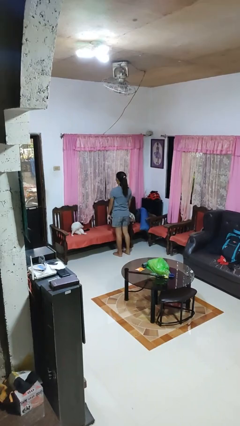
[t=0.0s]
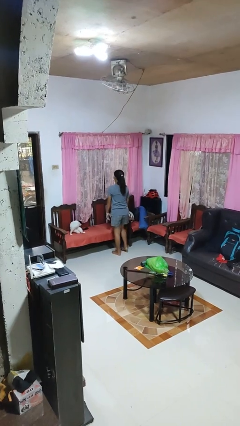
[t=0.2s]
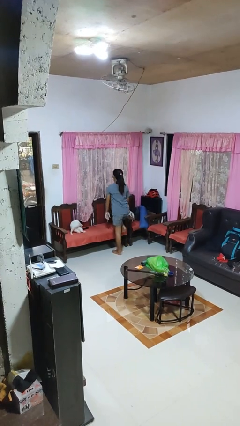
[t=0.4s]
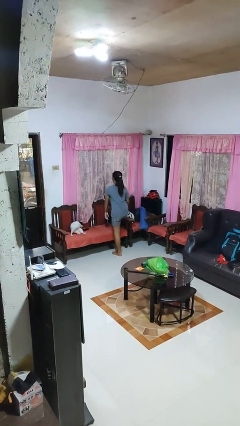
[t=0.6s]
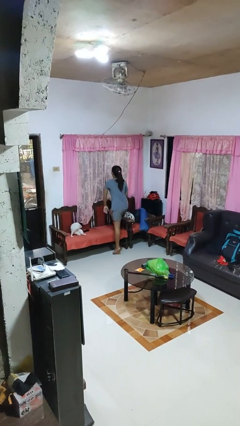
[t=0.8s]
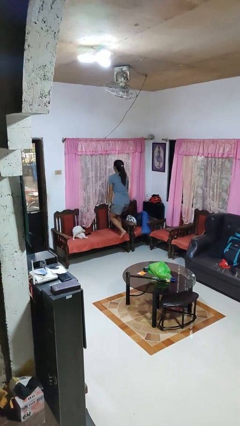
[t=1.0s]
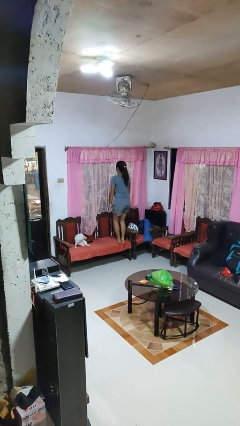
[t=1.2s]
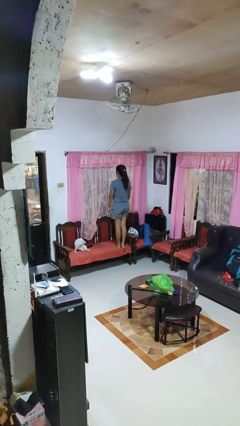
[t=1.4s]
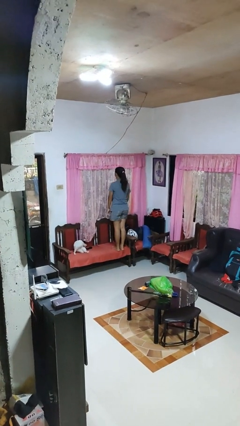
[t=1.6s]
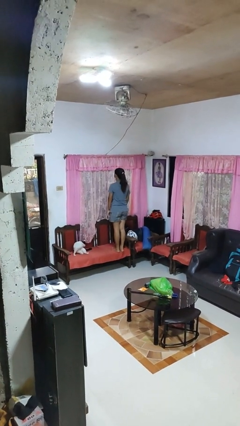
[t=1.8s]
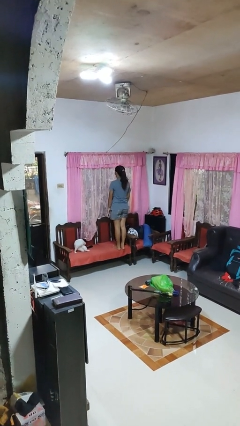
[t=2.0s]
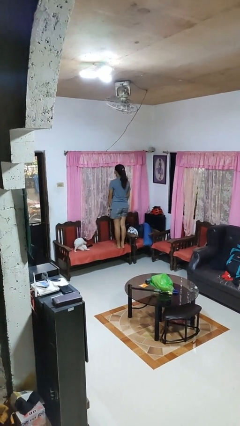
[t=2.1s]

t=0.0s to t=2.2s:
person climbs on chair

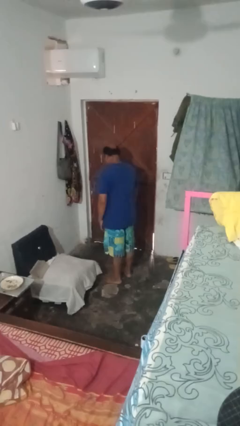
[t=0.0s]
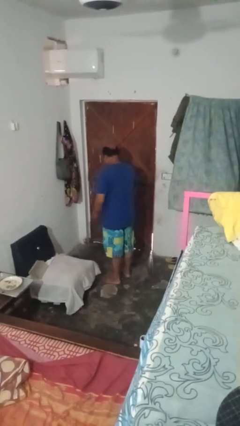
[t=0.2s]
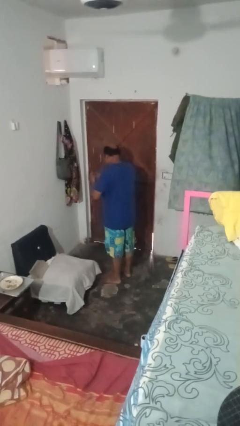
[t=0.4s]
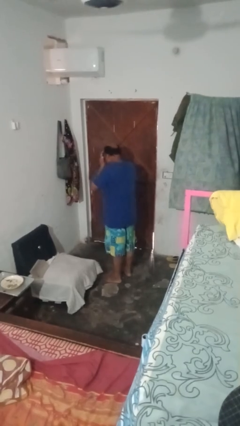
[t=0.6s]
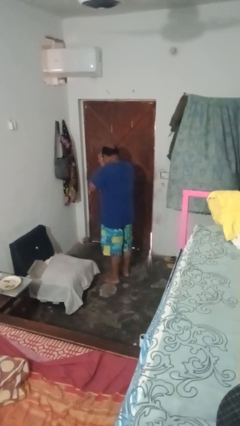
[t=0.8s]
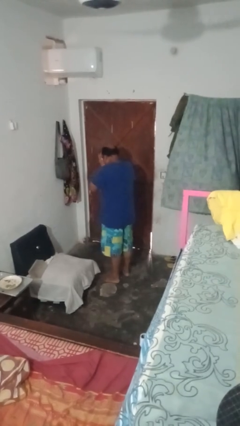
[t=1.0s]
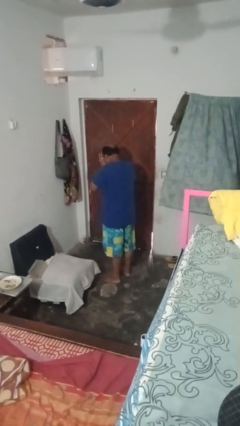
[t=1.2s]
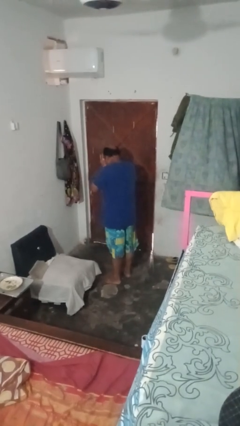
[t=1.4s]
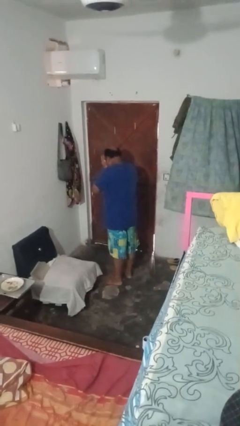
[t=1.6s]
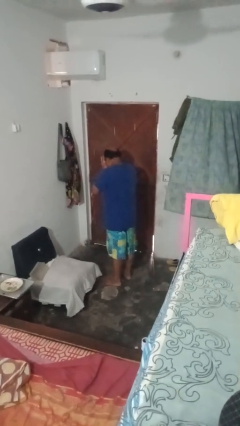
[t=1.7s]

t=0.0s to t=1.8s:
person covers face with hands

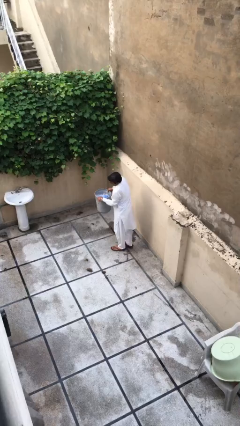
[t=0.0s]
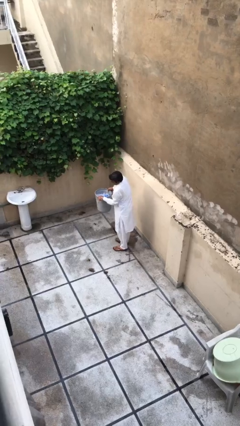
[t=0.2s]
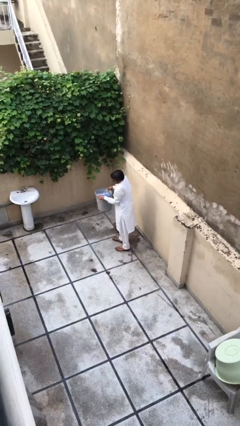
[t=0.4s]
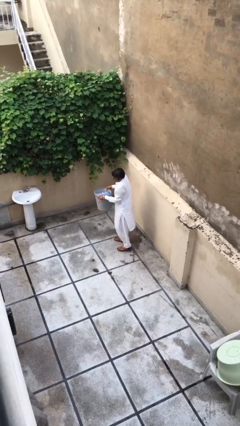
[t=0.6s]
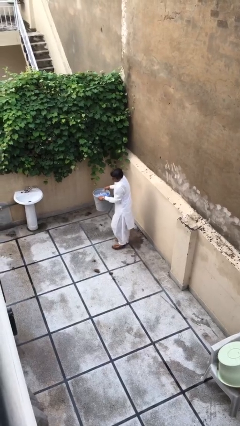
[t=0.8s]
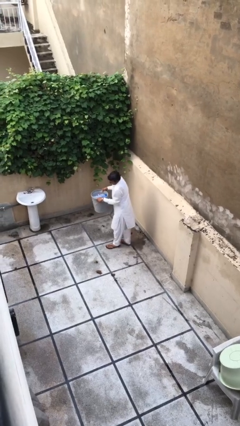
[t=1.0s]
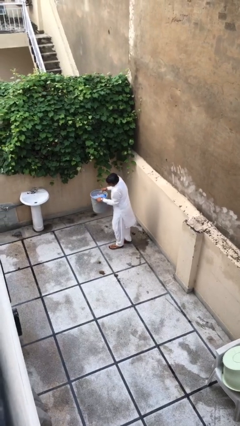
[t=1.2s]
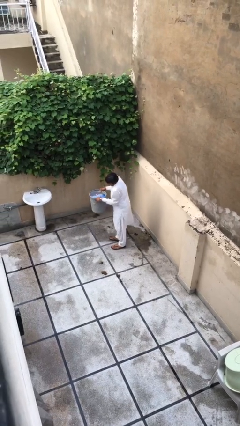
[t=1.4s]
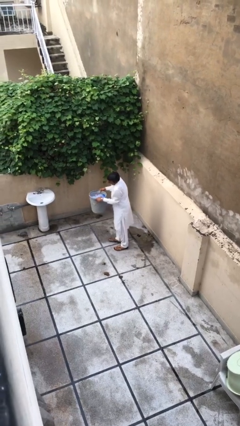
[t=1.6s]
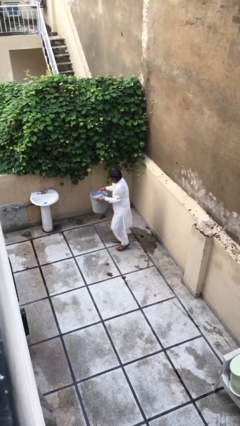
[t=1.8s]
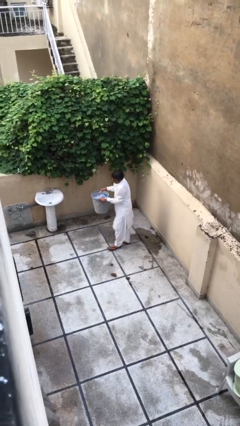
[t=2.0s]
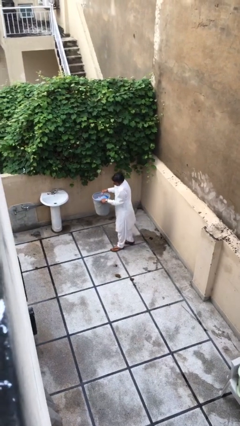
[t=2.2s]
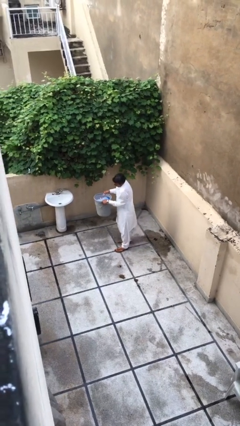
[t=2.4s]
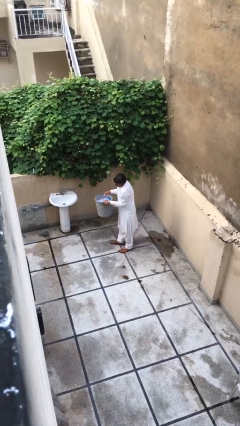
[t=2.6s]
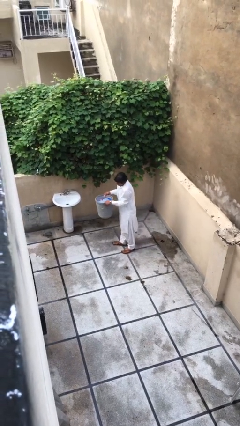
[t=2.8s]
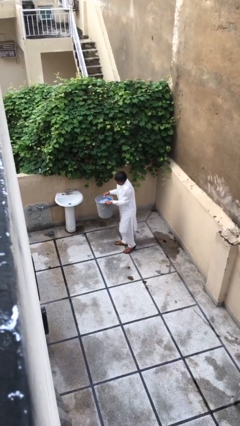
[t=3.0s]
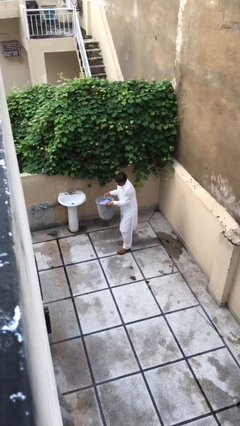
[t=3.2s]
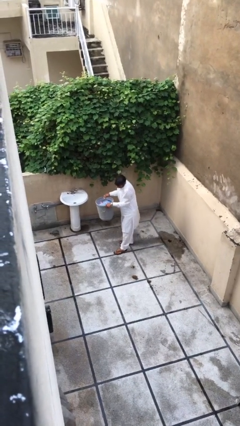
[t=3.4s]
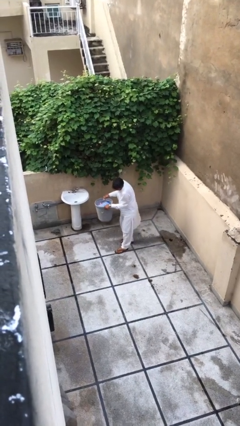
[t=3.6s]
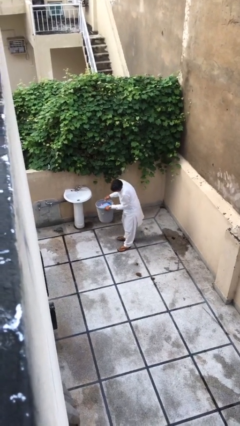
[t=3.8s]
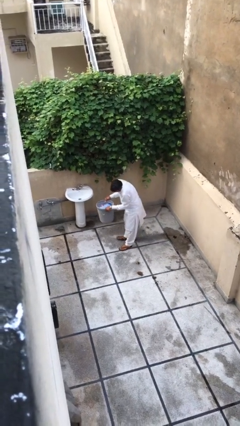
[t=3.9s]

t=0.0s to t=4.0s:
person carries heavy object

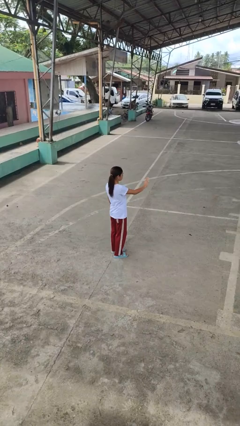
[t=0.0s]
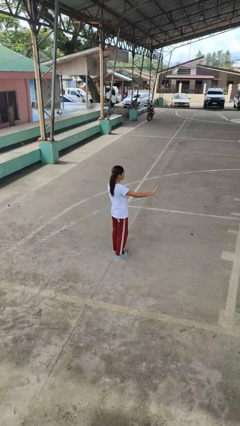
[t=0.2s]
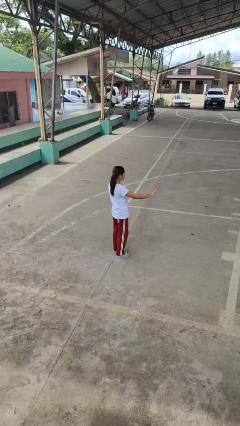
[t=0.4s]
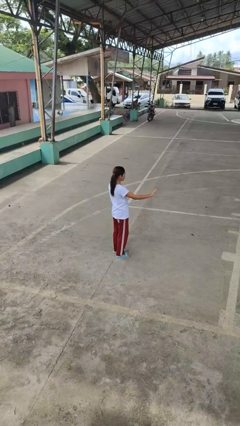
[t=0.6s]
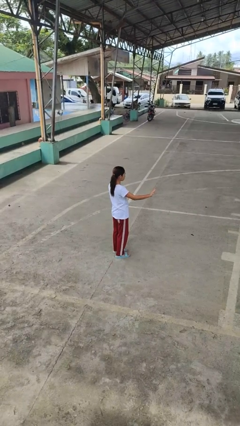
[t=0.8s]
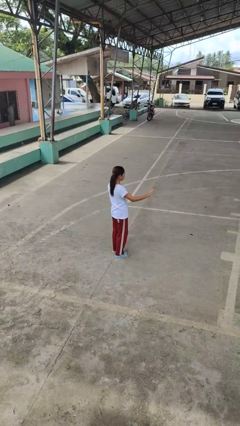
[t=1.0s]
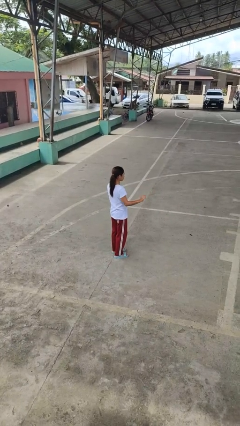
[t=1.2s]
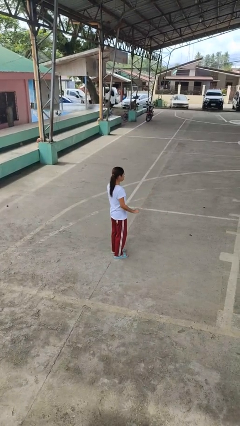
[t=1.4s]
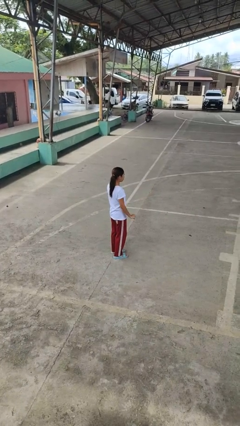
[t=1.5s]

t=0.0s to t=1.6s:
person gestures swipe right

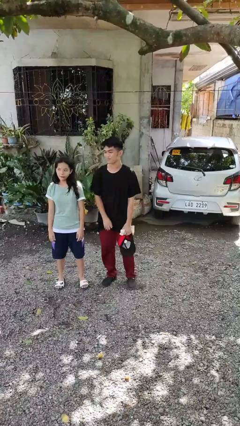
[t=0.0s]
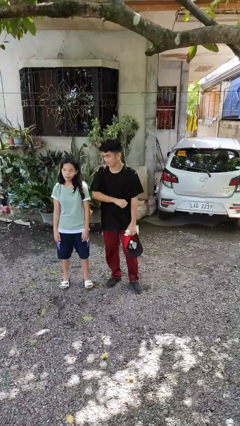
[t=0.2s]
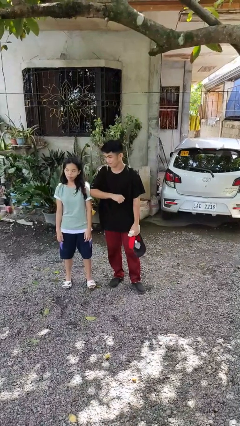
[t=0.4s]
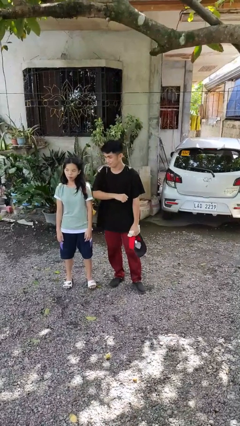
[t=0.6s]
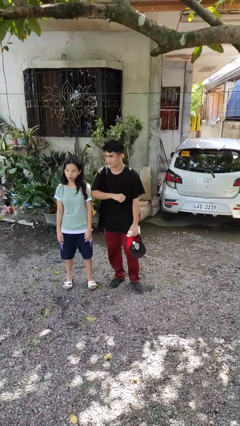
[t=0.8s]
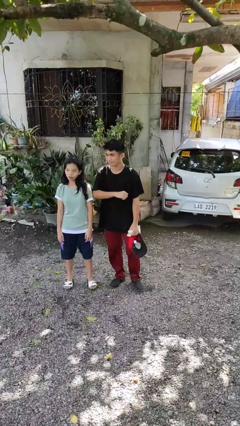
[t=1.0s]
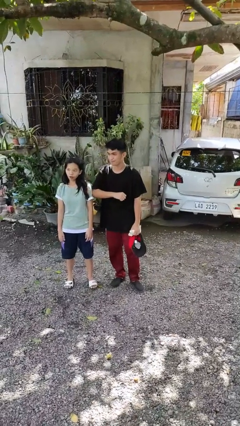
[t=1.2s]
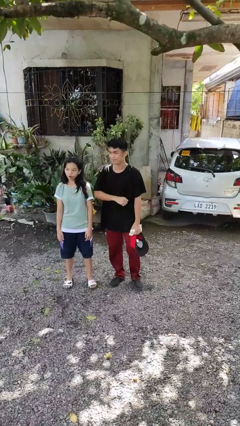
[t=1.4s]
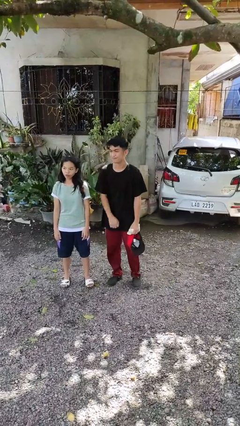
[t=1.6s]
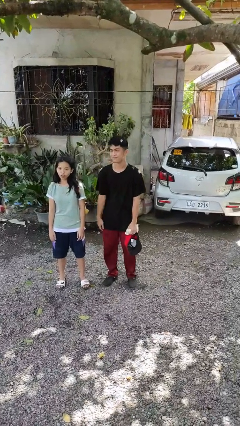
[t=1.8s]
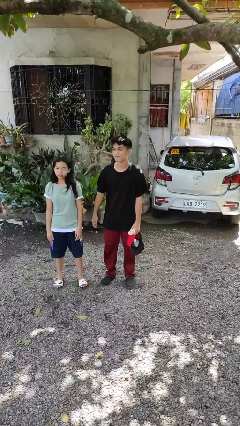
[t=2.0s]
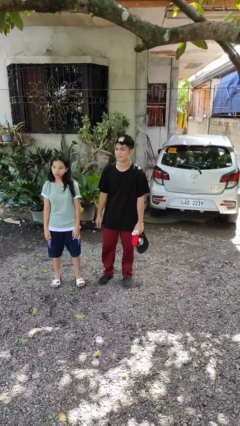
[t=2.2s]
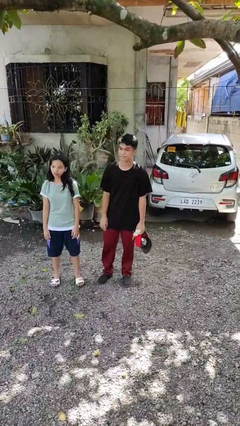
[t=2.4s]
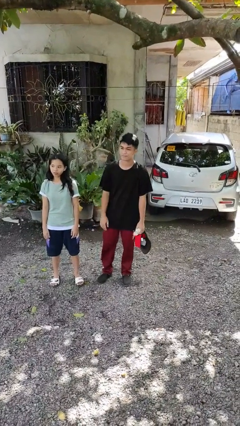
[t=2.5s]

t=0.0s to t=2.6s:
person nudges person with elbow

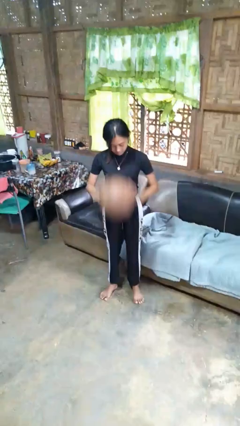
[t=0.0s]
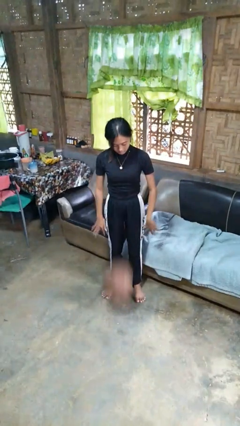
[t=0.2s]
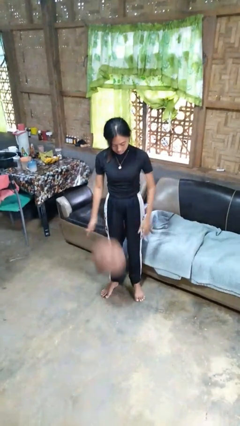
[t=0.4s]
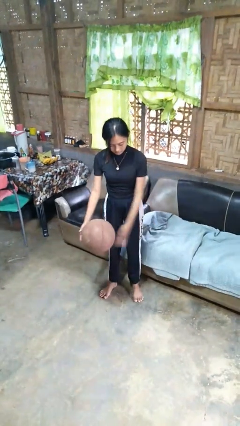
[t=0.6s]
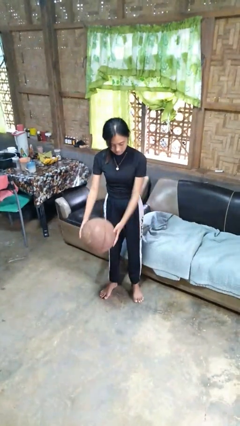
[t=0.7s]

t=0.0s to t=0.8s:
person bounces ball on floor

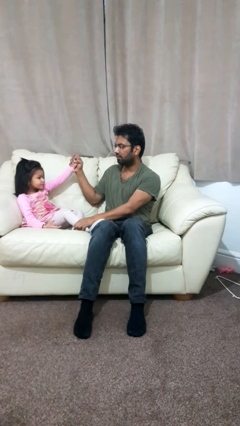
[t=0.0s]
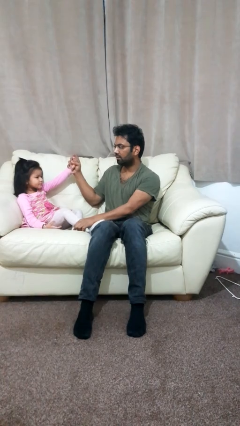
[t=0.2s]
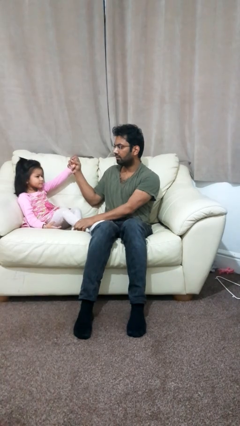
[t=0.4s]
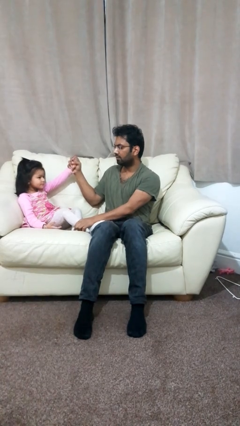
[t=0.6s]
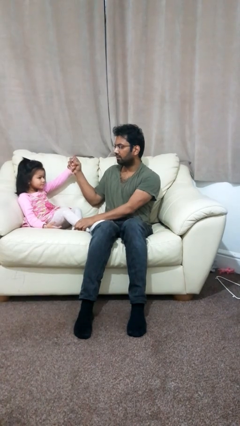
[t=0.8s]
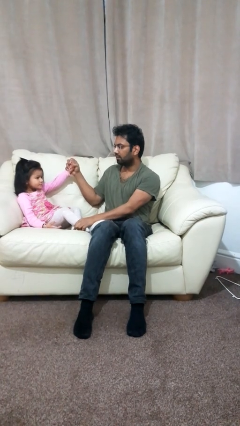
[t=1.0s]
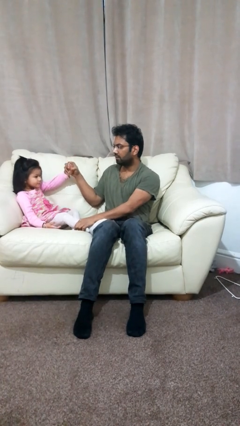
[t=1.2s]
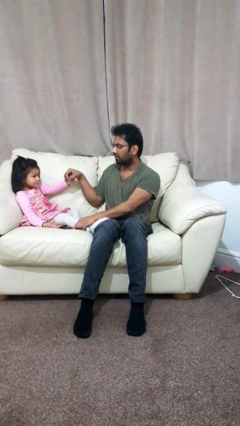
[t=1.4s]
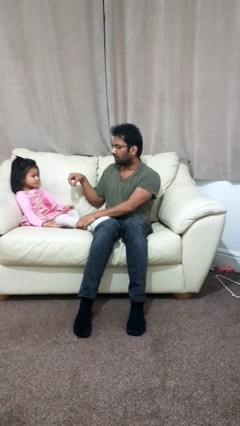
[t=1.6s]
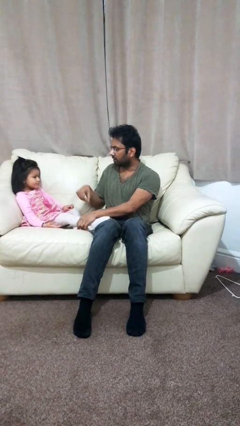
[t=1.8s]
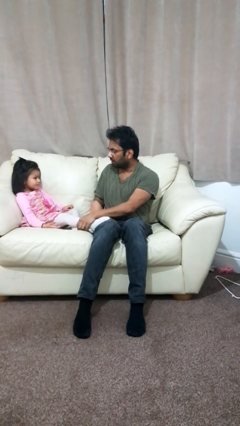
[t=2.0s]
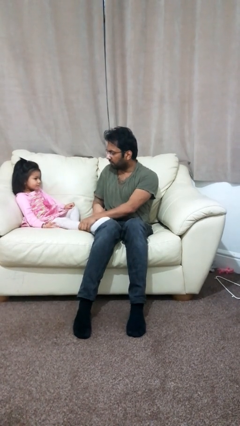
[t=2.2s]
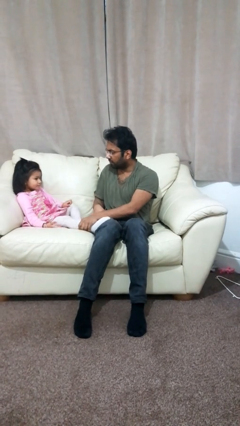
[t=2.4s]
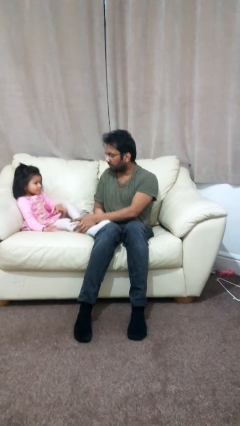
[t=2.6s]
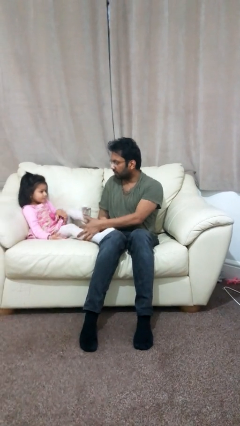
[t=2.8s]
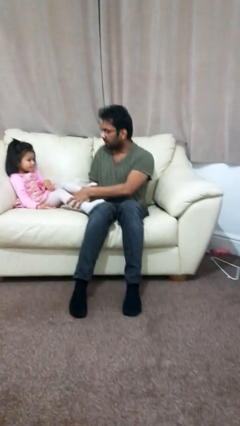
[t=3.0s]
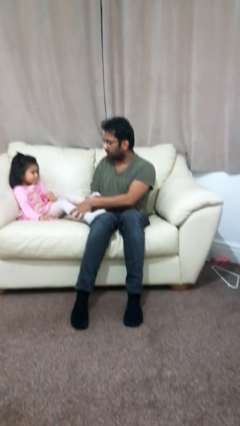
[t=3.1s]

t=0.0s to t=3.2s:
person highfives hand

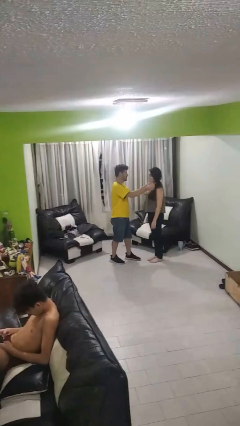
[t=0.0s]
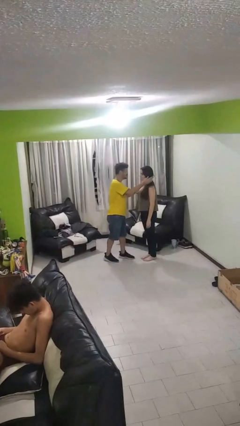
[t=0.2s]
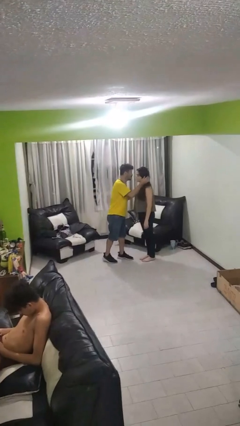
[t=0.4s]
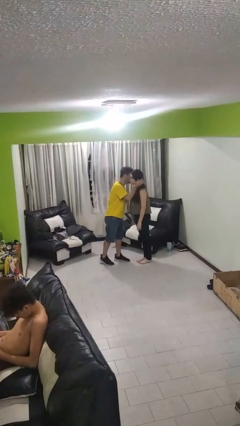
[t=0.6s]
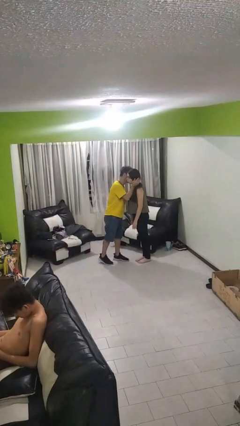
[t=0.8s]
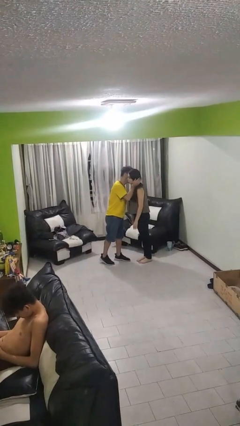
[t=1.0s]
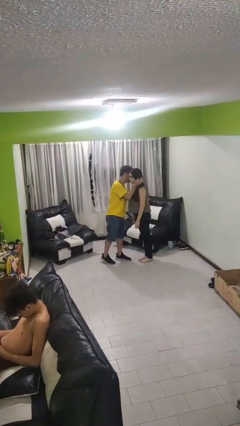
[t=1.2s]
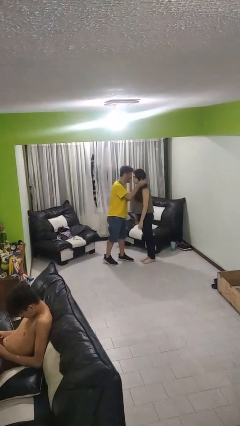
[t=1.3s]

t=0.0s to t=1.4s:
person kisses cheek of person
